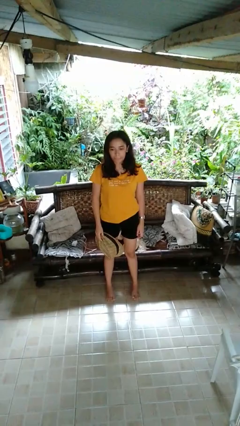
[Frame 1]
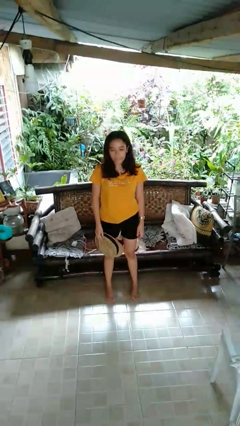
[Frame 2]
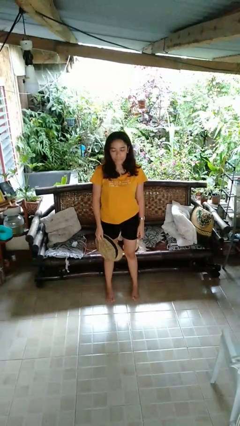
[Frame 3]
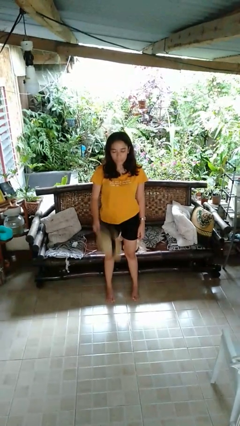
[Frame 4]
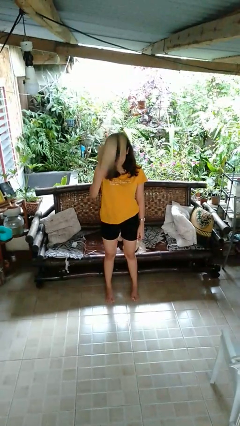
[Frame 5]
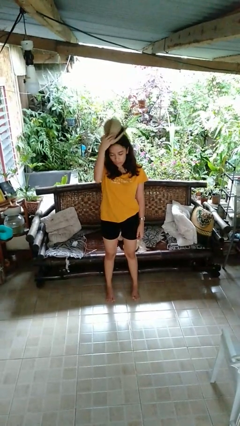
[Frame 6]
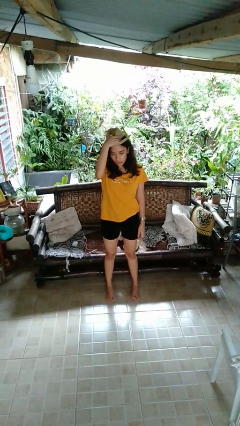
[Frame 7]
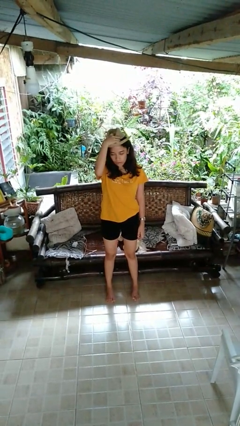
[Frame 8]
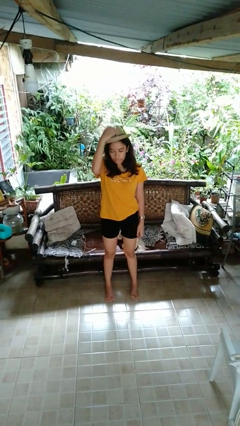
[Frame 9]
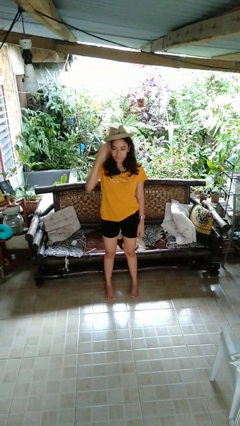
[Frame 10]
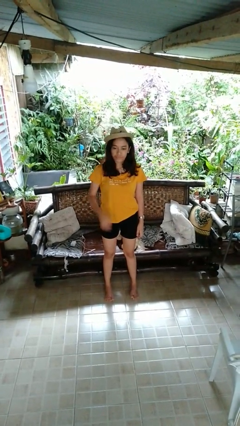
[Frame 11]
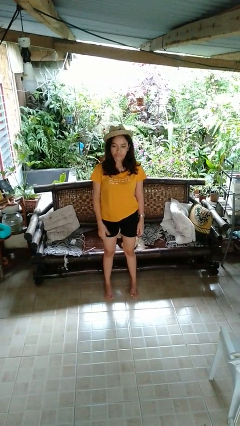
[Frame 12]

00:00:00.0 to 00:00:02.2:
person puts on hat

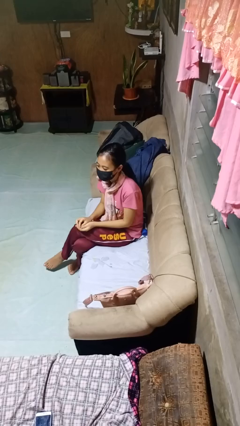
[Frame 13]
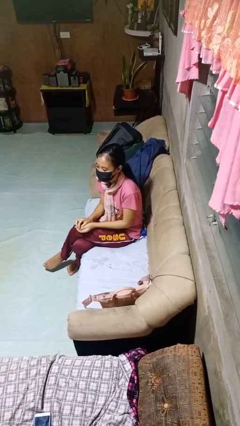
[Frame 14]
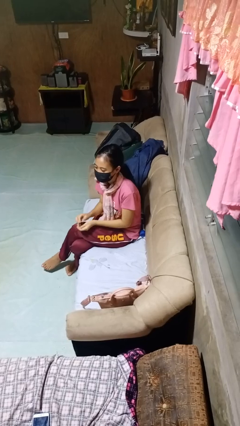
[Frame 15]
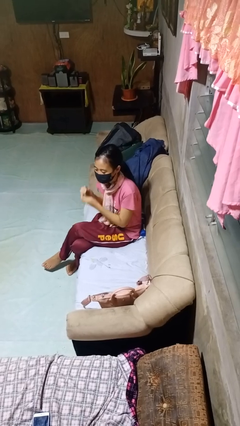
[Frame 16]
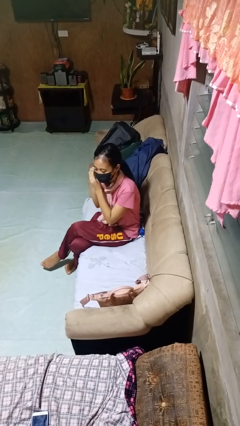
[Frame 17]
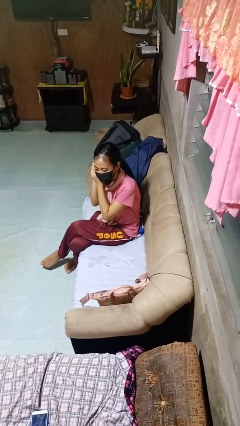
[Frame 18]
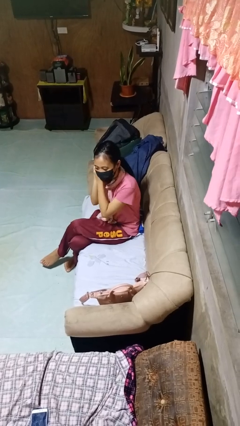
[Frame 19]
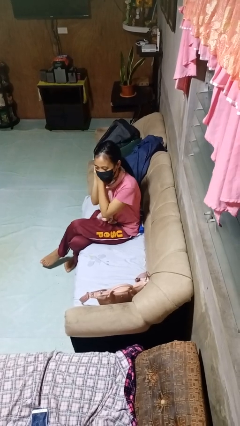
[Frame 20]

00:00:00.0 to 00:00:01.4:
person puts on earrings

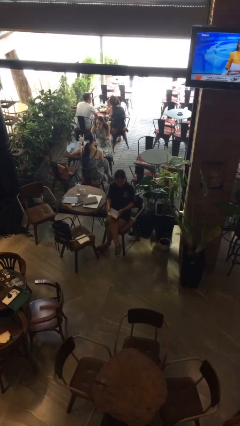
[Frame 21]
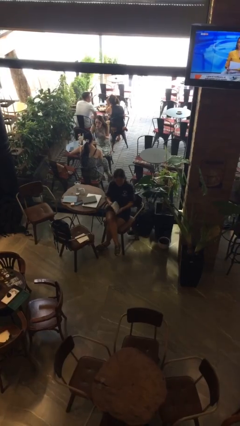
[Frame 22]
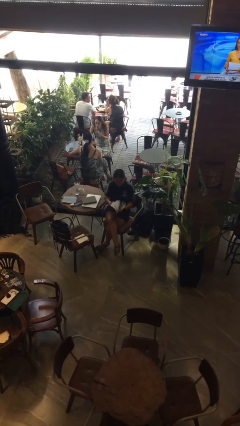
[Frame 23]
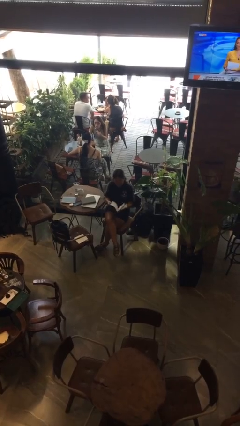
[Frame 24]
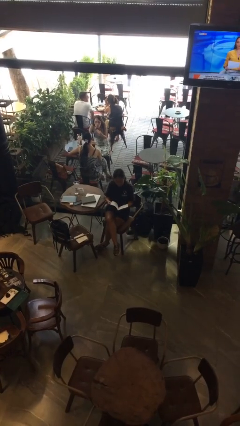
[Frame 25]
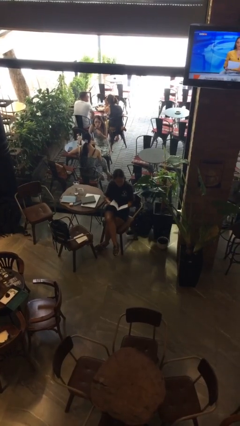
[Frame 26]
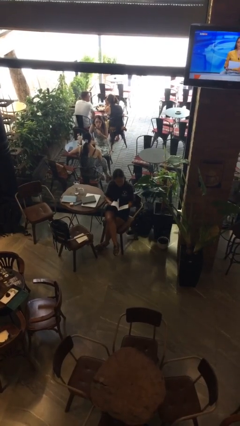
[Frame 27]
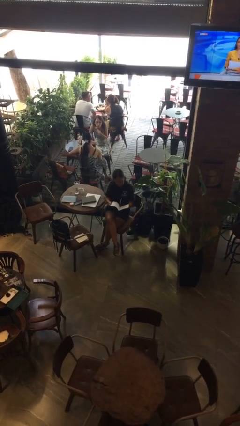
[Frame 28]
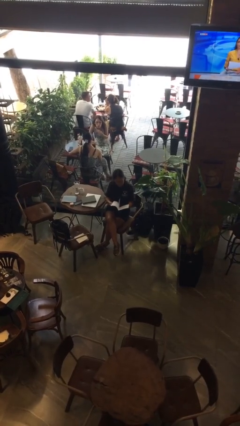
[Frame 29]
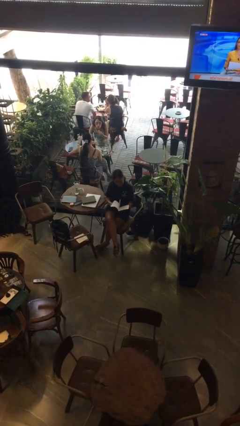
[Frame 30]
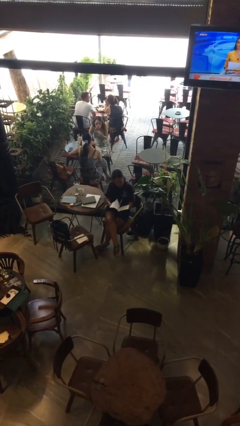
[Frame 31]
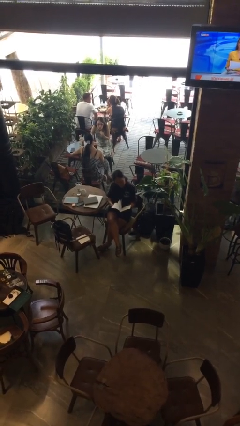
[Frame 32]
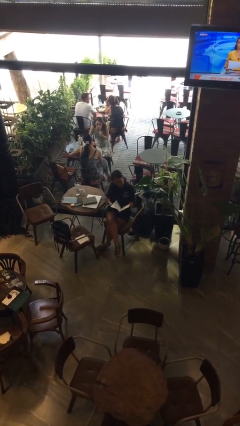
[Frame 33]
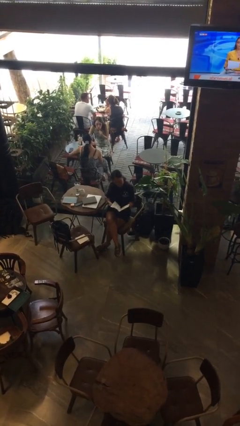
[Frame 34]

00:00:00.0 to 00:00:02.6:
person reads magazine

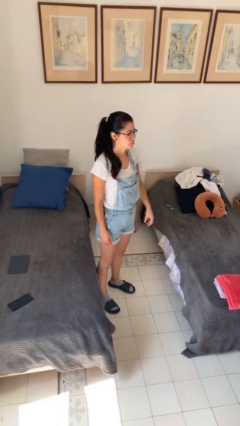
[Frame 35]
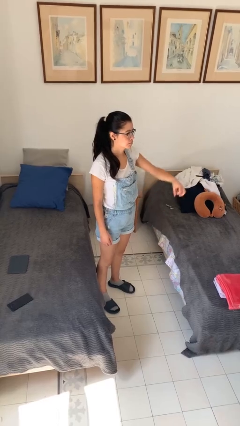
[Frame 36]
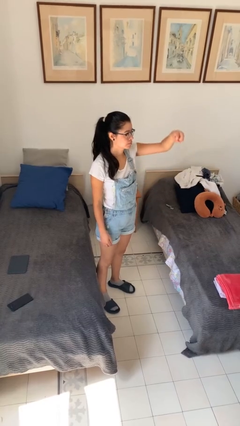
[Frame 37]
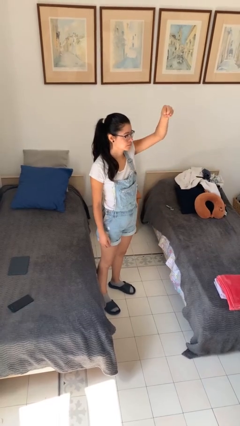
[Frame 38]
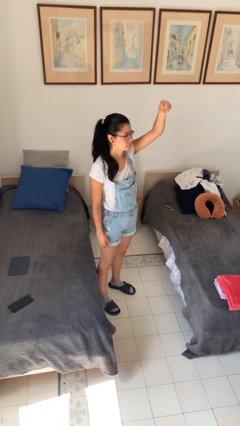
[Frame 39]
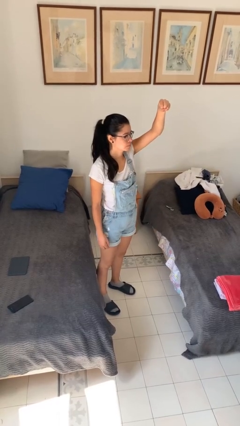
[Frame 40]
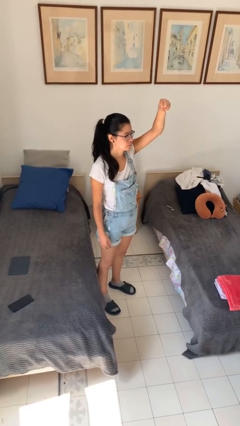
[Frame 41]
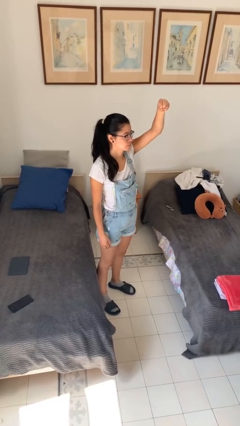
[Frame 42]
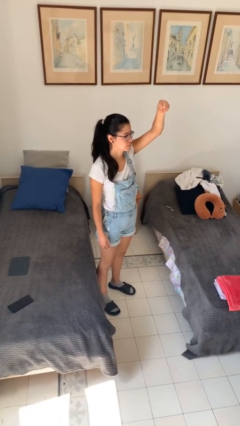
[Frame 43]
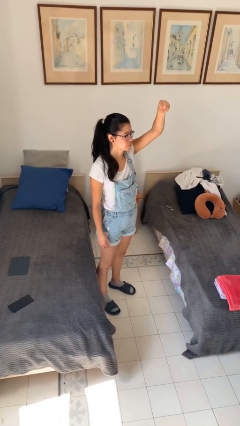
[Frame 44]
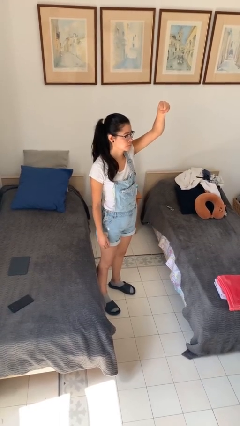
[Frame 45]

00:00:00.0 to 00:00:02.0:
person gestures hang loose

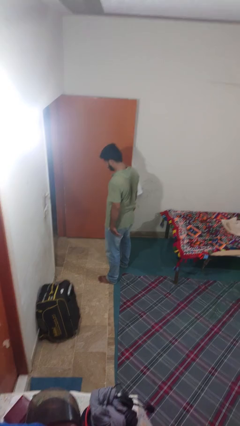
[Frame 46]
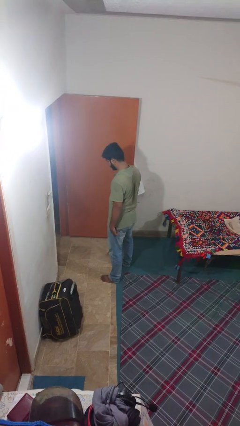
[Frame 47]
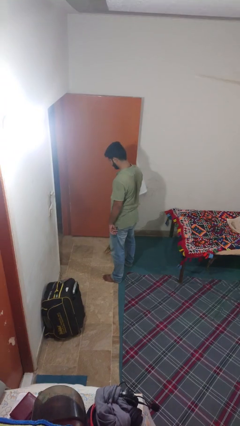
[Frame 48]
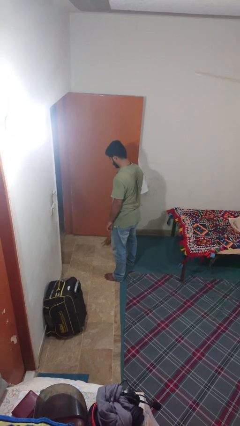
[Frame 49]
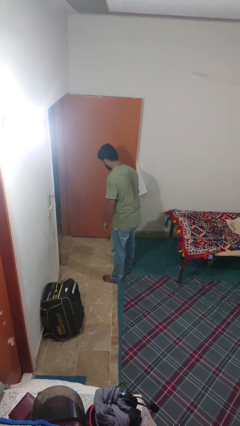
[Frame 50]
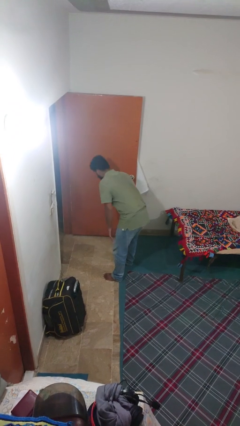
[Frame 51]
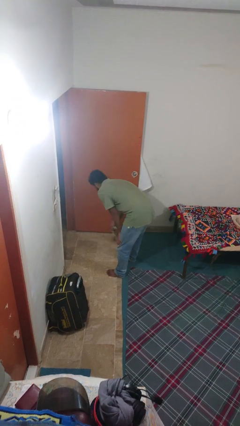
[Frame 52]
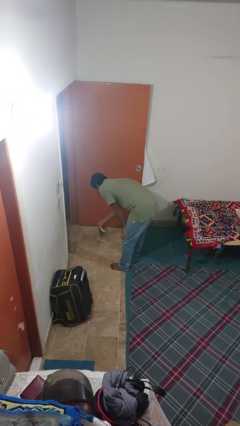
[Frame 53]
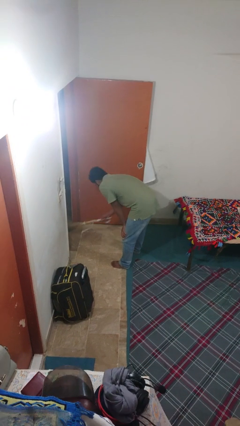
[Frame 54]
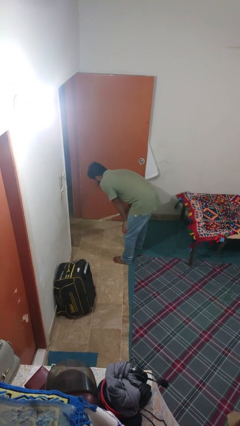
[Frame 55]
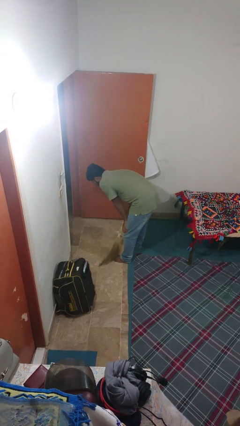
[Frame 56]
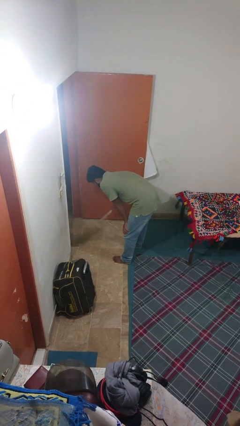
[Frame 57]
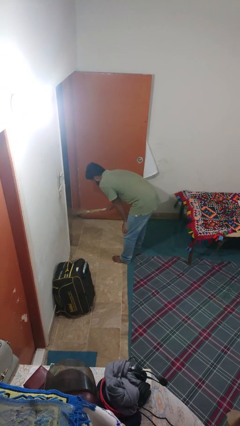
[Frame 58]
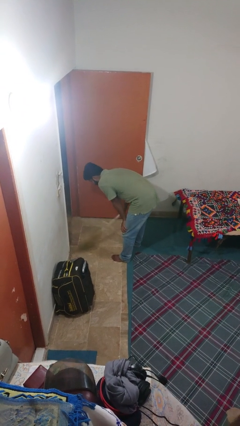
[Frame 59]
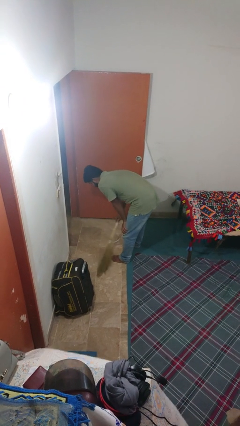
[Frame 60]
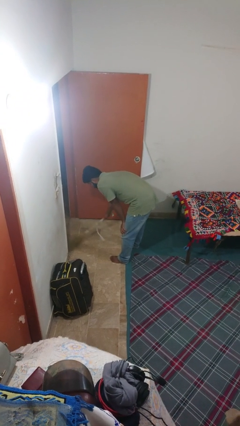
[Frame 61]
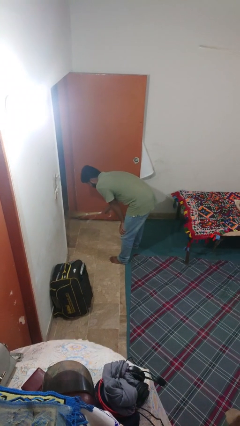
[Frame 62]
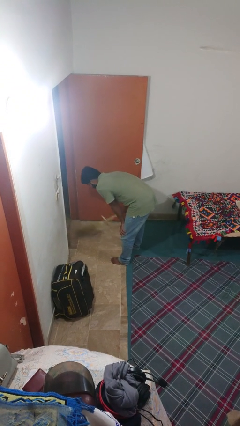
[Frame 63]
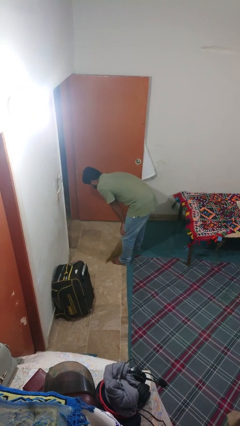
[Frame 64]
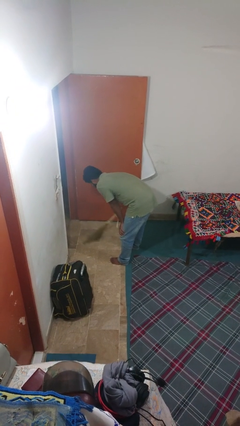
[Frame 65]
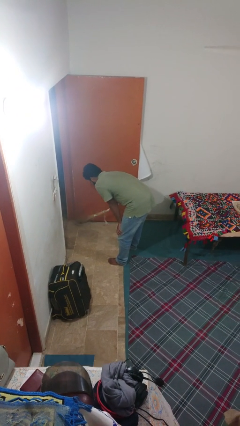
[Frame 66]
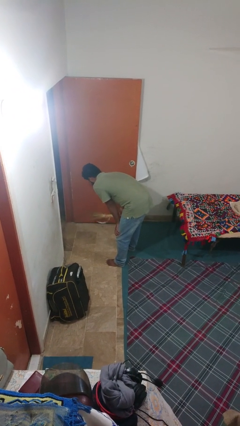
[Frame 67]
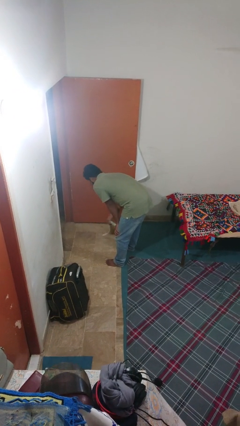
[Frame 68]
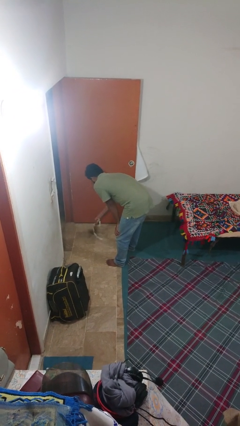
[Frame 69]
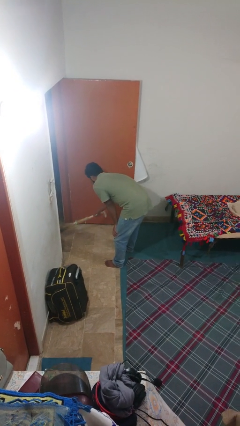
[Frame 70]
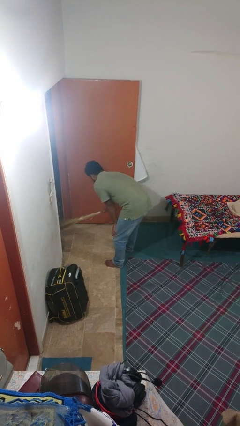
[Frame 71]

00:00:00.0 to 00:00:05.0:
person sweeps floor

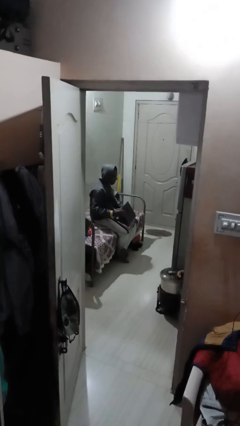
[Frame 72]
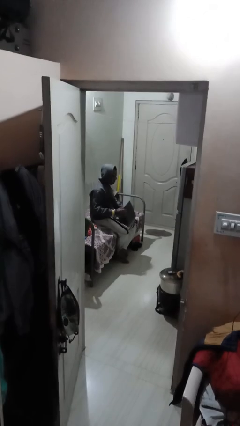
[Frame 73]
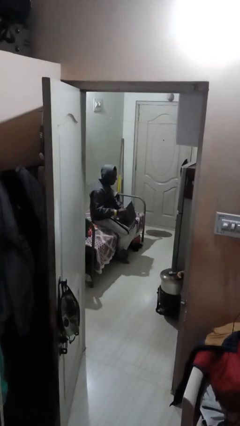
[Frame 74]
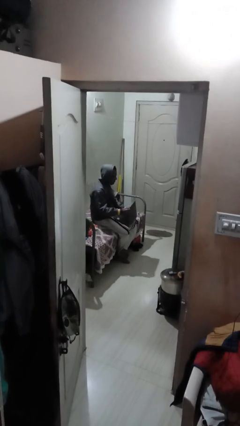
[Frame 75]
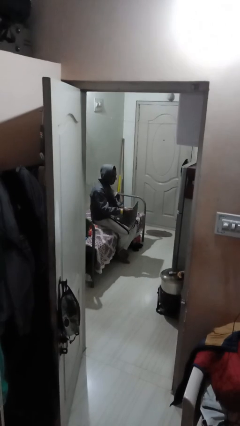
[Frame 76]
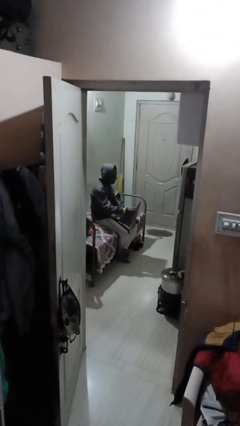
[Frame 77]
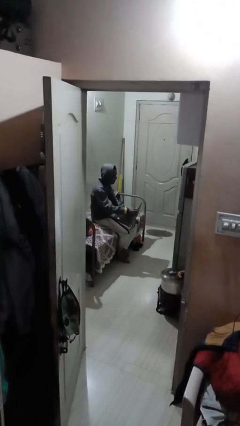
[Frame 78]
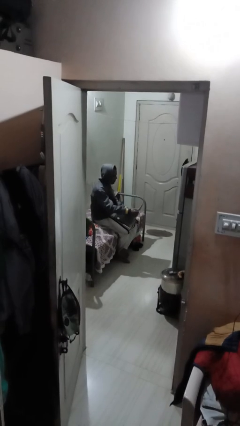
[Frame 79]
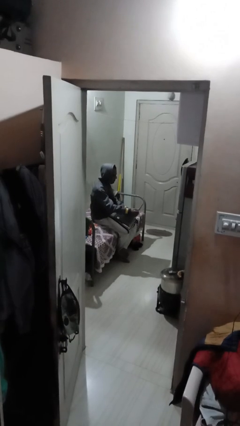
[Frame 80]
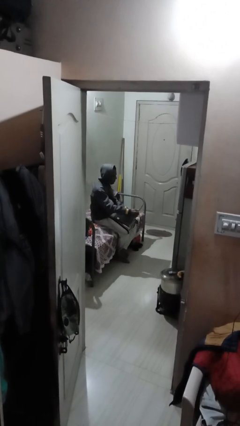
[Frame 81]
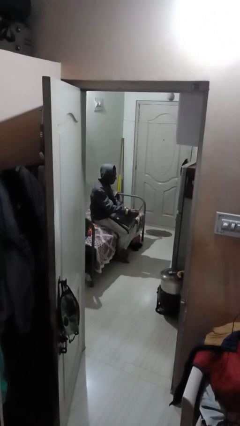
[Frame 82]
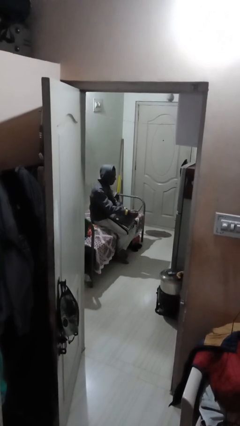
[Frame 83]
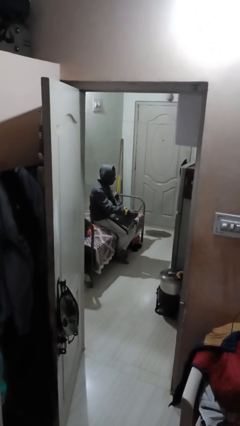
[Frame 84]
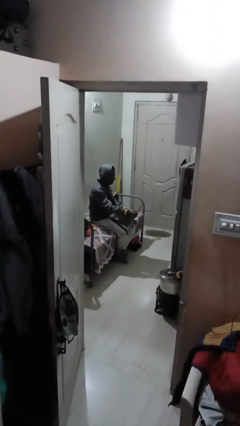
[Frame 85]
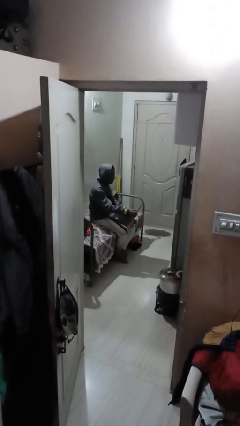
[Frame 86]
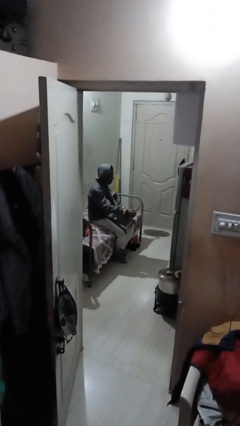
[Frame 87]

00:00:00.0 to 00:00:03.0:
person interacts with laptop

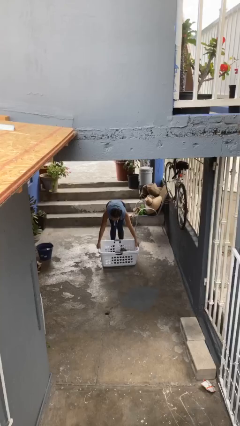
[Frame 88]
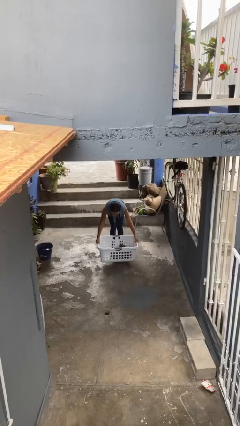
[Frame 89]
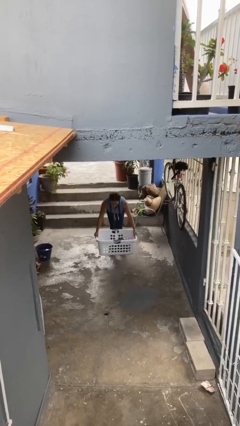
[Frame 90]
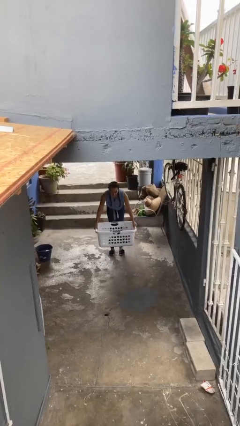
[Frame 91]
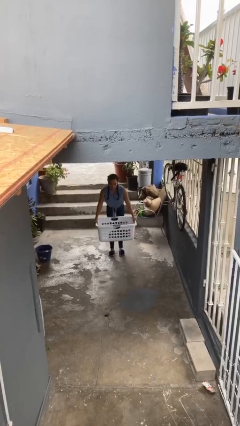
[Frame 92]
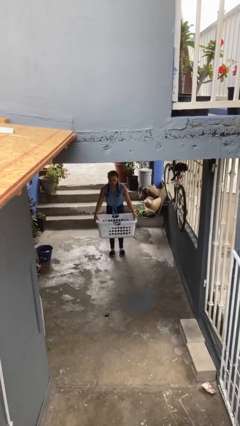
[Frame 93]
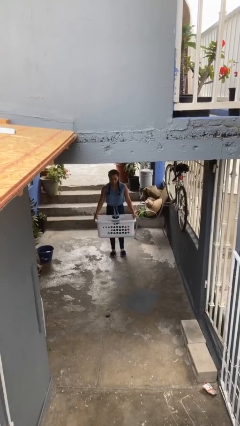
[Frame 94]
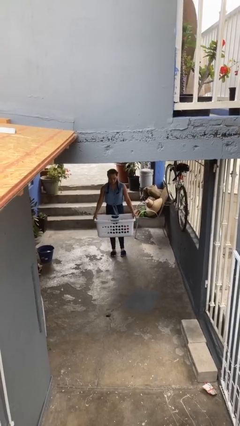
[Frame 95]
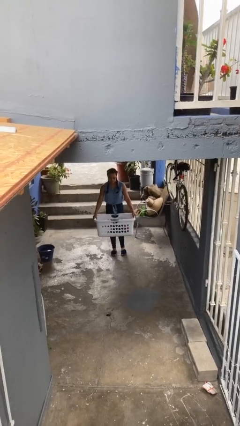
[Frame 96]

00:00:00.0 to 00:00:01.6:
person picks up object from floor
